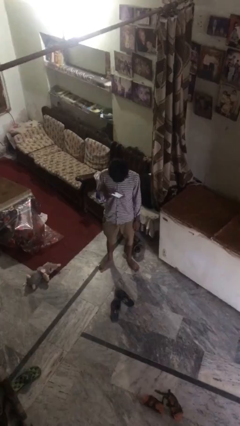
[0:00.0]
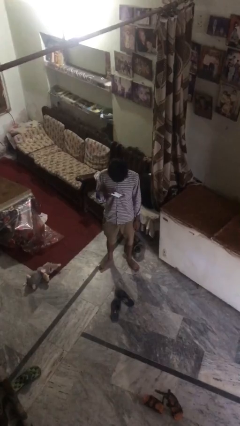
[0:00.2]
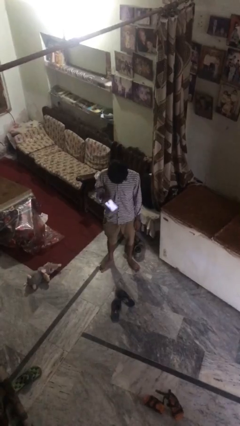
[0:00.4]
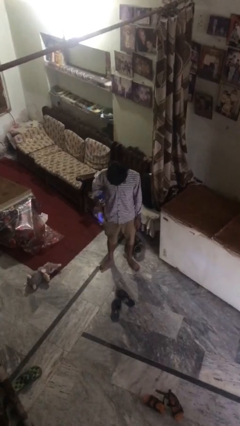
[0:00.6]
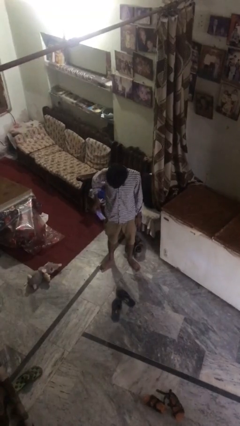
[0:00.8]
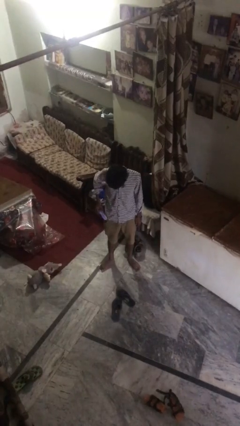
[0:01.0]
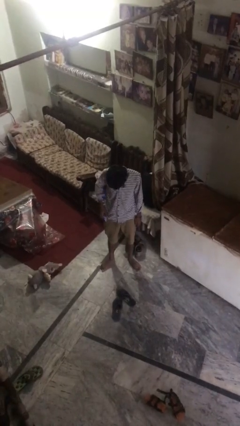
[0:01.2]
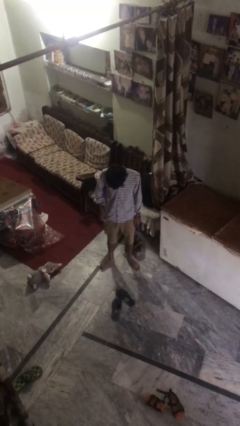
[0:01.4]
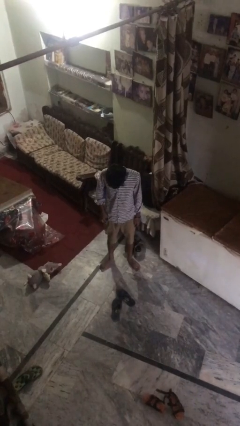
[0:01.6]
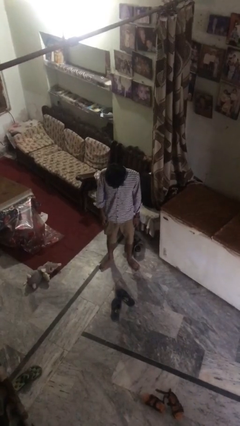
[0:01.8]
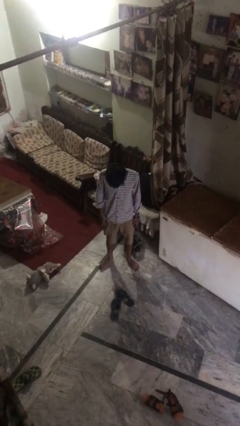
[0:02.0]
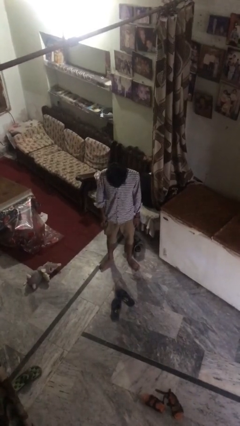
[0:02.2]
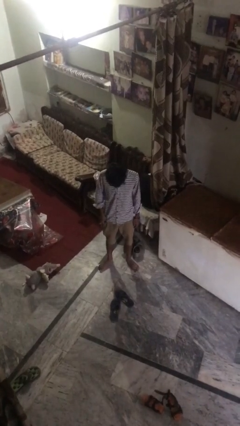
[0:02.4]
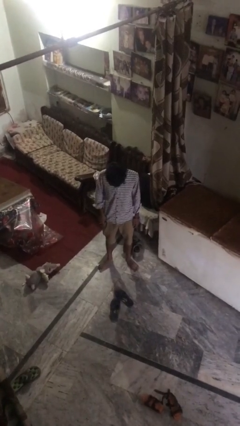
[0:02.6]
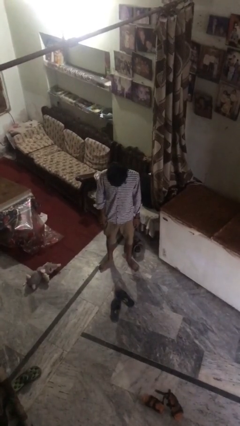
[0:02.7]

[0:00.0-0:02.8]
person puts phone into pocket

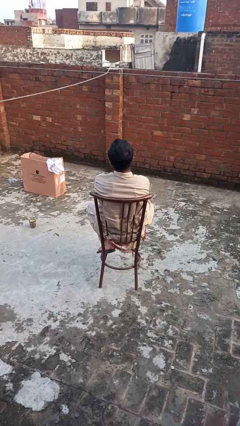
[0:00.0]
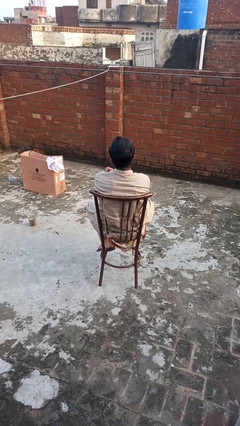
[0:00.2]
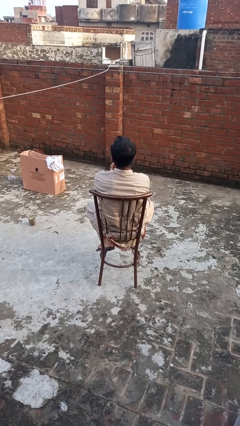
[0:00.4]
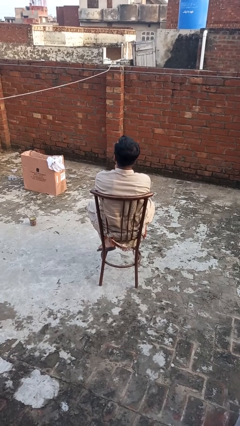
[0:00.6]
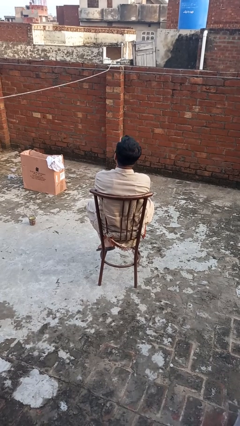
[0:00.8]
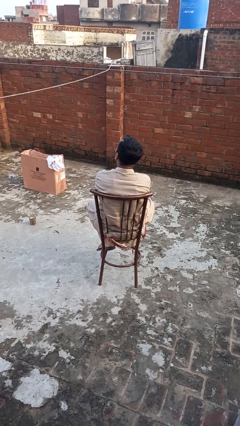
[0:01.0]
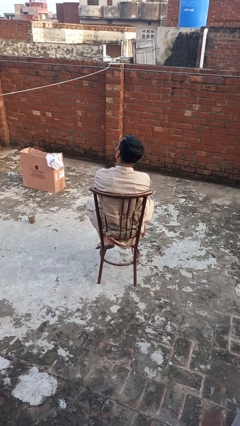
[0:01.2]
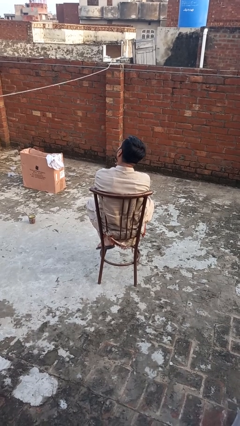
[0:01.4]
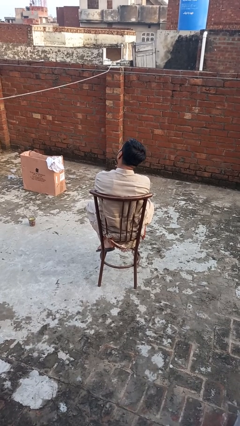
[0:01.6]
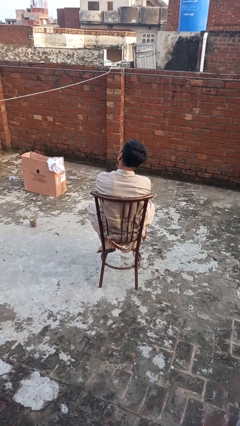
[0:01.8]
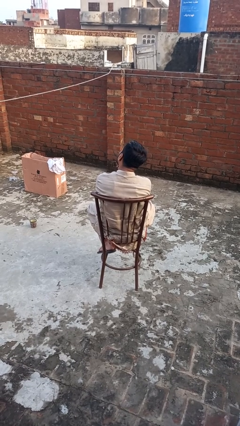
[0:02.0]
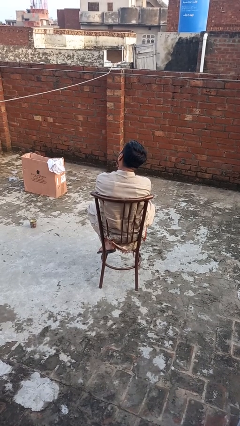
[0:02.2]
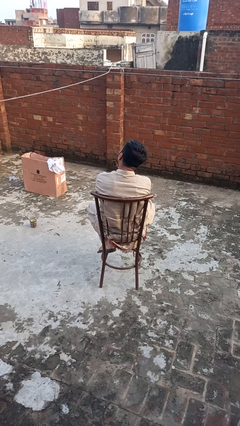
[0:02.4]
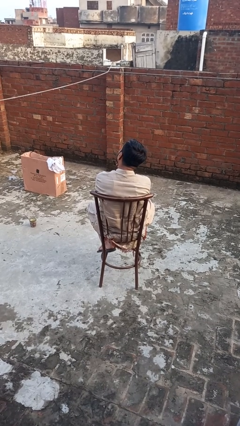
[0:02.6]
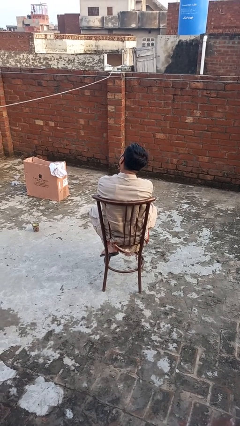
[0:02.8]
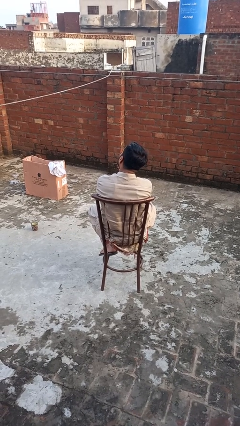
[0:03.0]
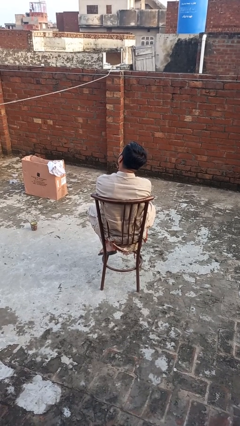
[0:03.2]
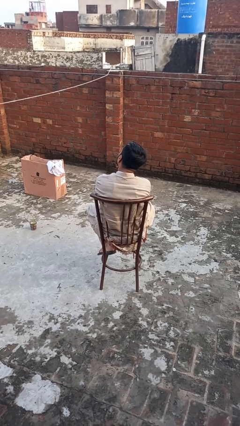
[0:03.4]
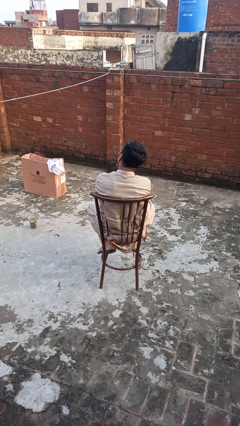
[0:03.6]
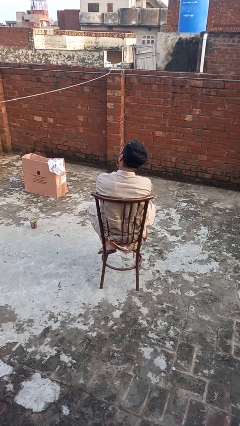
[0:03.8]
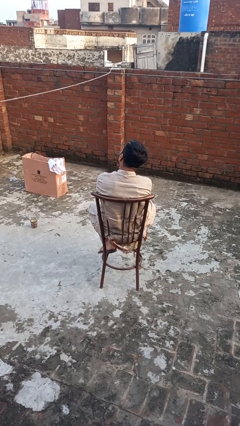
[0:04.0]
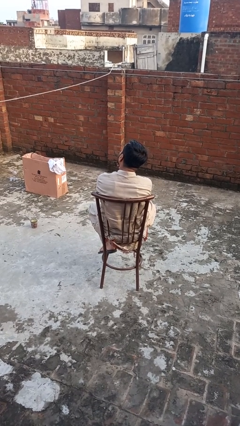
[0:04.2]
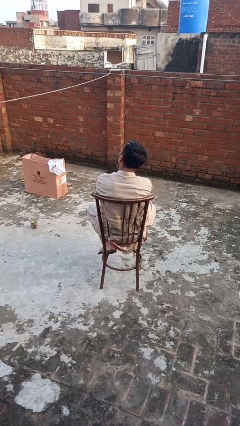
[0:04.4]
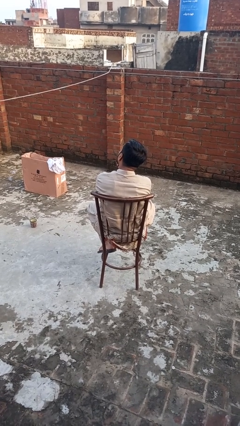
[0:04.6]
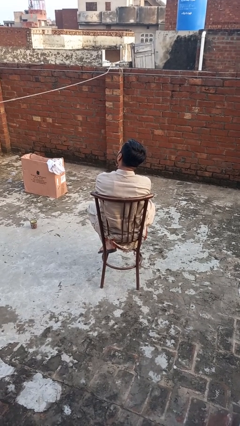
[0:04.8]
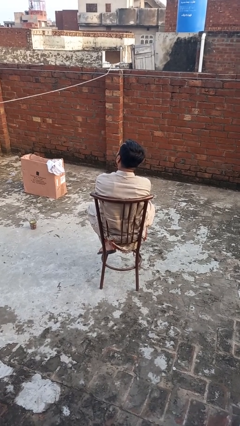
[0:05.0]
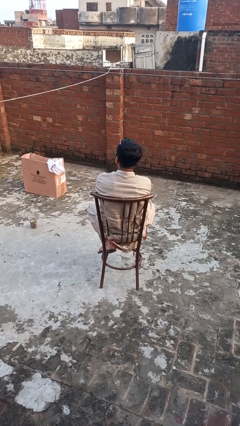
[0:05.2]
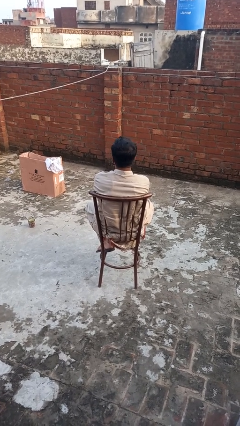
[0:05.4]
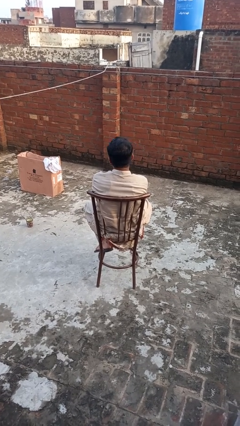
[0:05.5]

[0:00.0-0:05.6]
person strokes chin

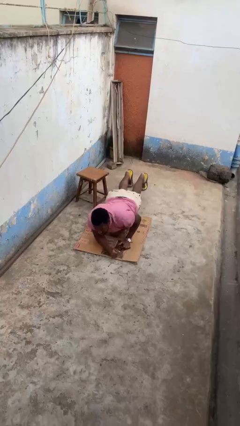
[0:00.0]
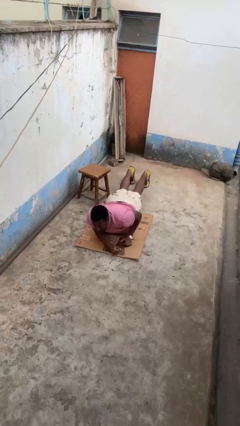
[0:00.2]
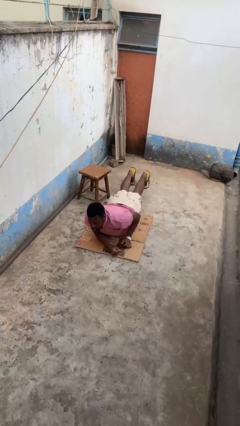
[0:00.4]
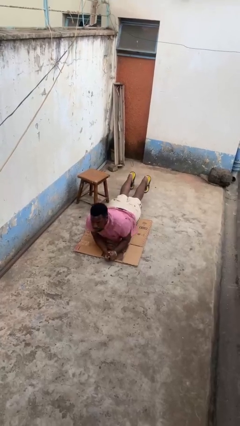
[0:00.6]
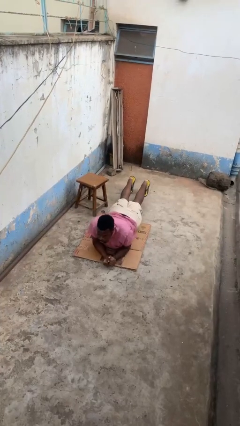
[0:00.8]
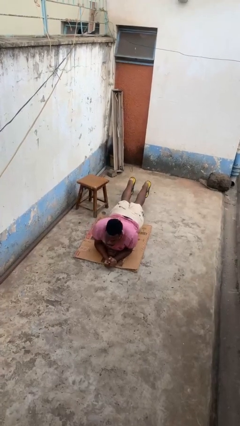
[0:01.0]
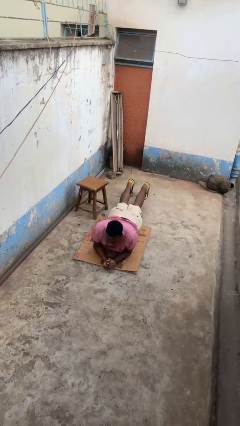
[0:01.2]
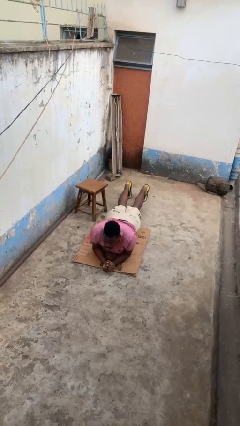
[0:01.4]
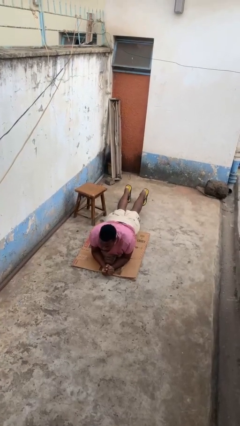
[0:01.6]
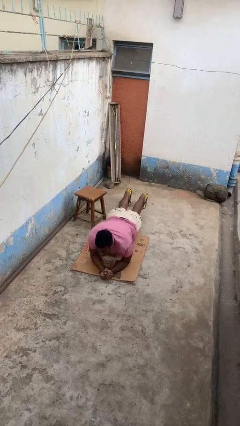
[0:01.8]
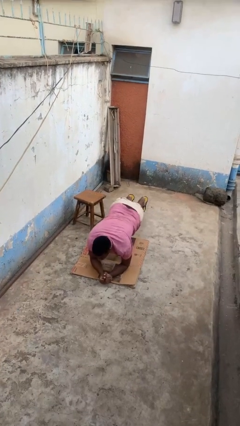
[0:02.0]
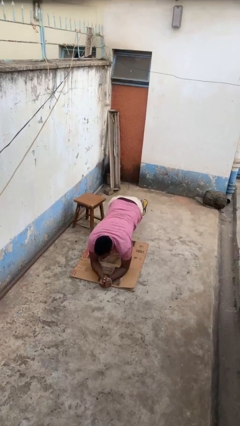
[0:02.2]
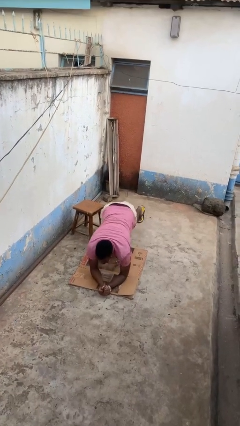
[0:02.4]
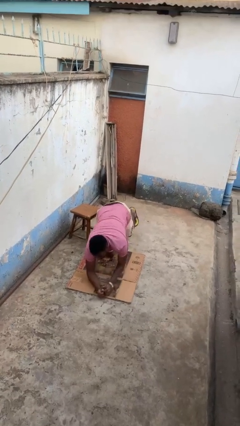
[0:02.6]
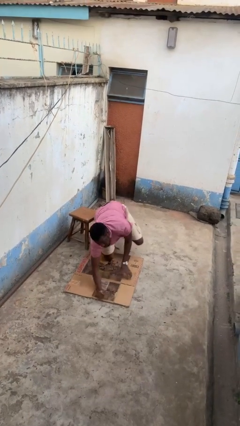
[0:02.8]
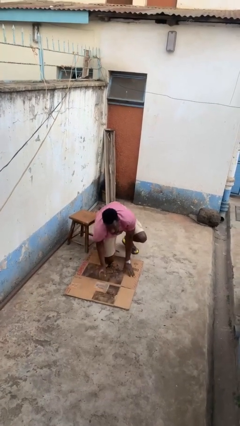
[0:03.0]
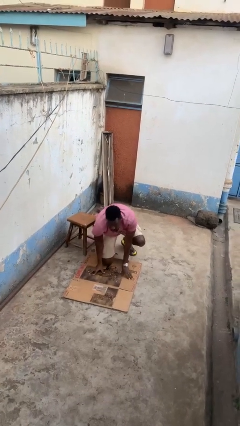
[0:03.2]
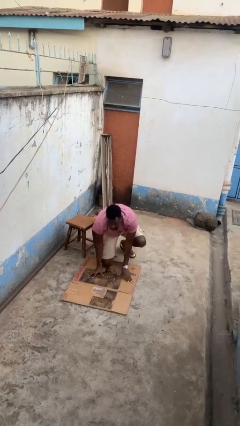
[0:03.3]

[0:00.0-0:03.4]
person lies down on floor

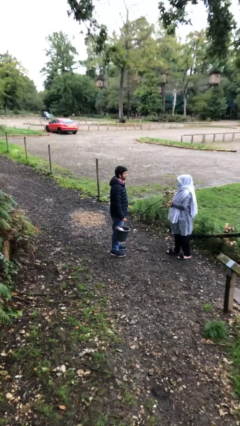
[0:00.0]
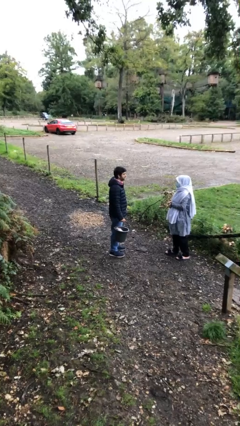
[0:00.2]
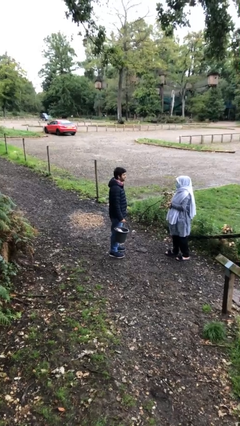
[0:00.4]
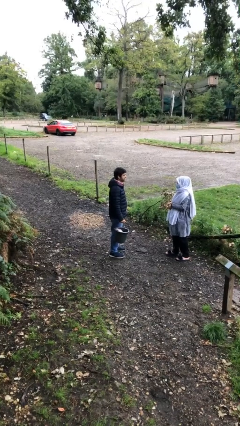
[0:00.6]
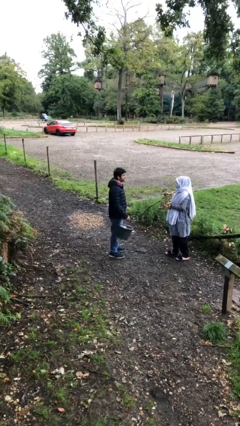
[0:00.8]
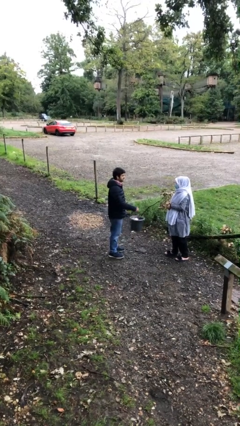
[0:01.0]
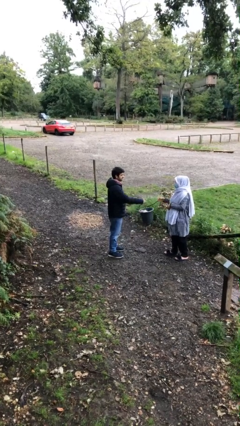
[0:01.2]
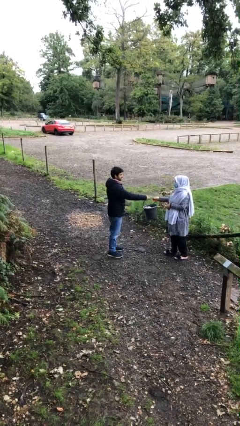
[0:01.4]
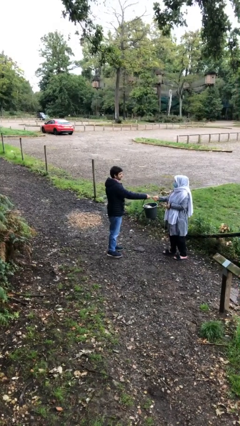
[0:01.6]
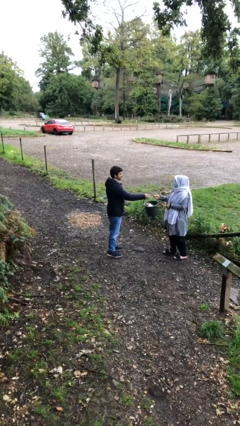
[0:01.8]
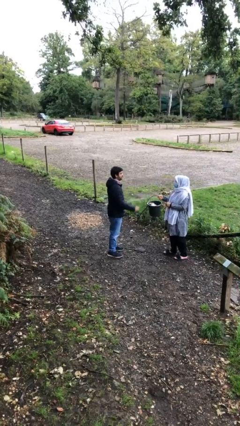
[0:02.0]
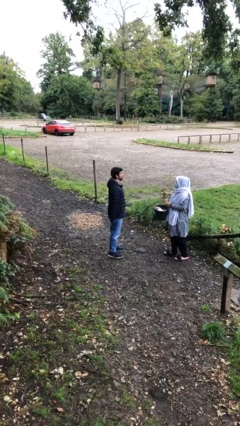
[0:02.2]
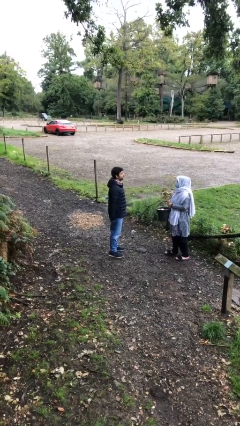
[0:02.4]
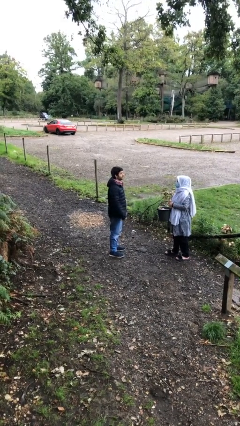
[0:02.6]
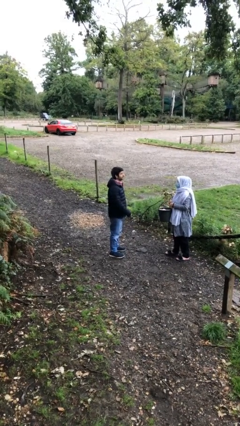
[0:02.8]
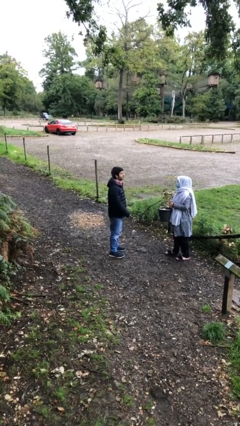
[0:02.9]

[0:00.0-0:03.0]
person transfers object to person

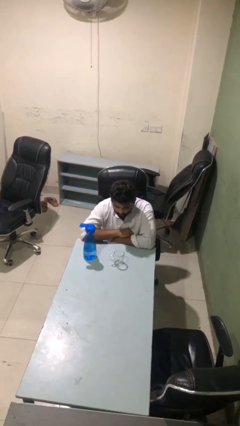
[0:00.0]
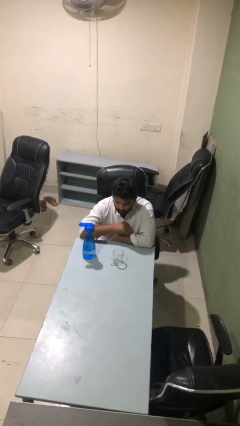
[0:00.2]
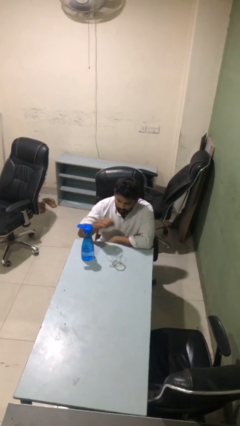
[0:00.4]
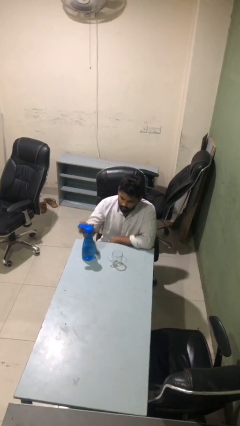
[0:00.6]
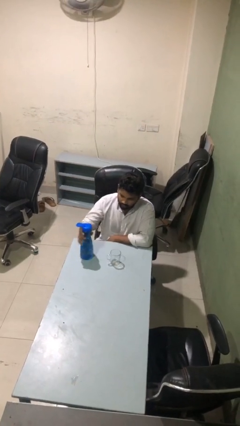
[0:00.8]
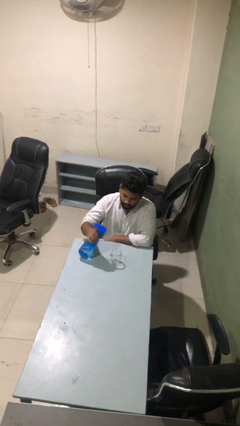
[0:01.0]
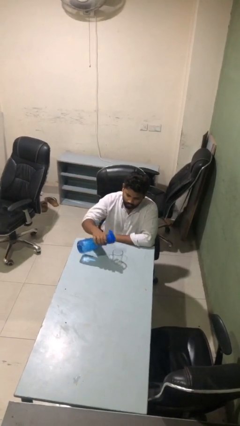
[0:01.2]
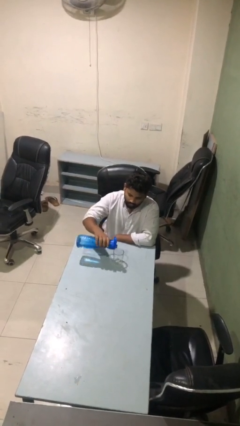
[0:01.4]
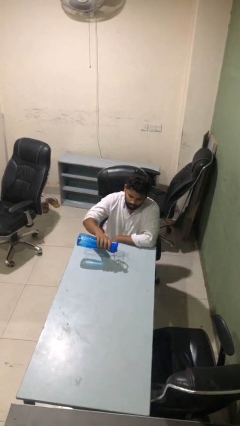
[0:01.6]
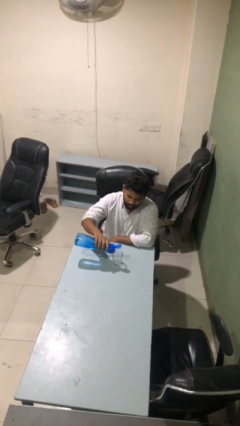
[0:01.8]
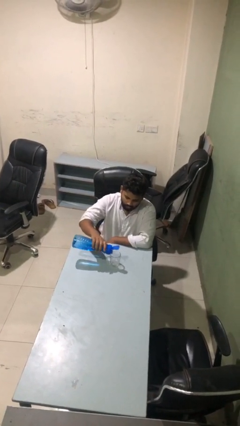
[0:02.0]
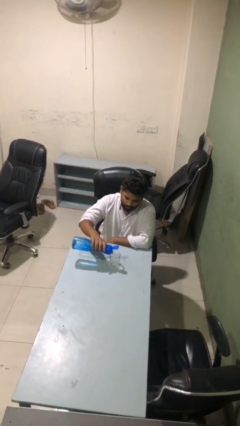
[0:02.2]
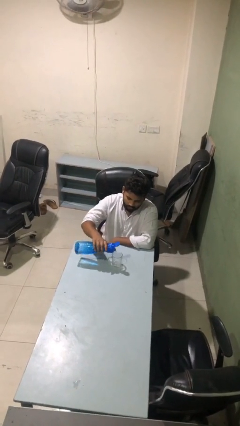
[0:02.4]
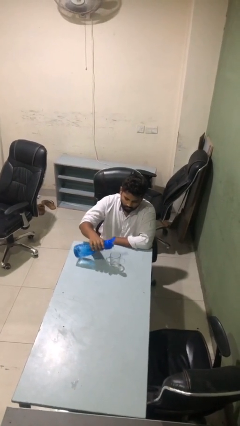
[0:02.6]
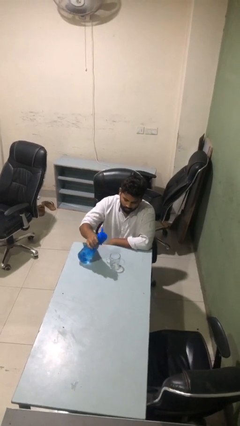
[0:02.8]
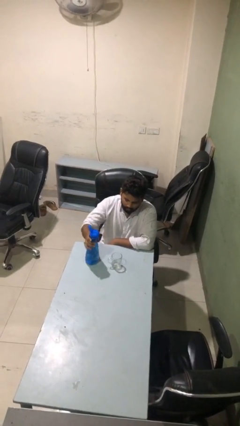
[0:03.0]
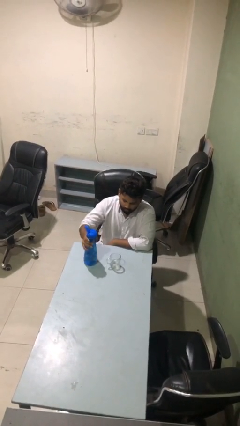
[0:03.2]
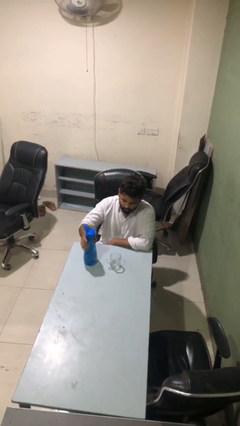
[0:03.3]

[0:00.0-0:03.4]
person pours liquid into cup
